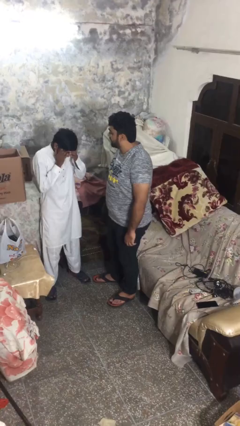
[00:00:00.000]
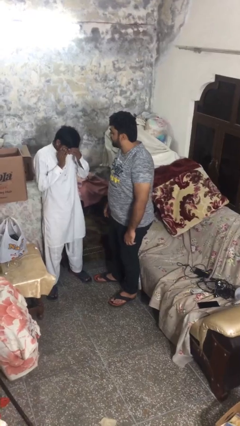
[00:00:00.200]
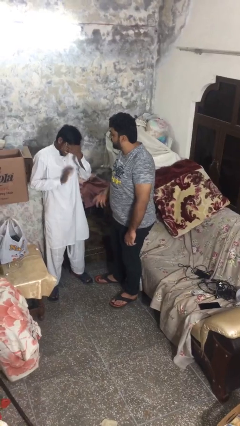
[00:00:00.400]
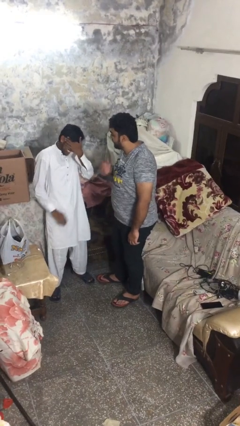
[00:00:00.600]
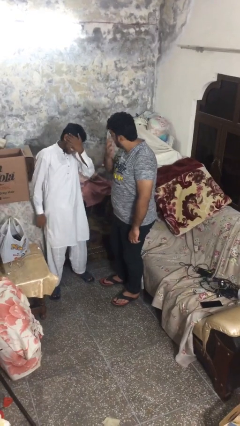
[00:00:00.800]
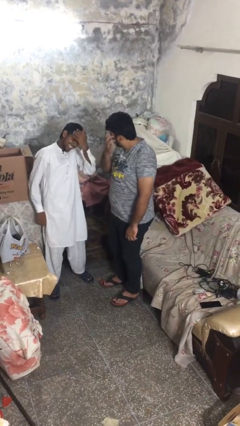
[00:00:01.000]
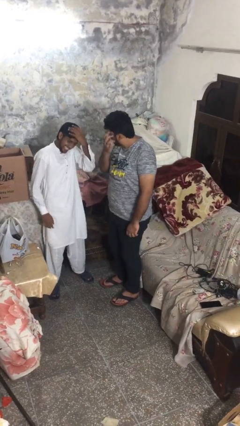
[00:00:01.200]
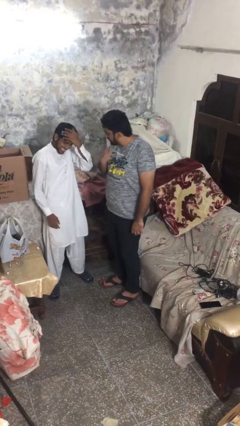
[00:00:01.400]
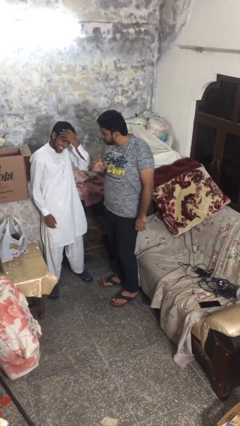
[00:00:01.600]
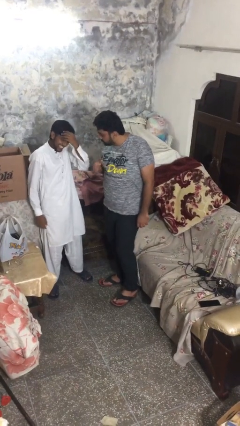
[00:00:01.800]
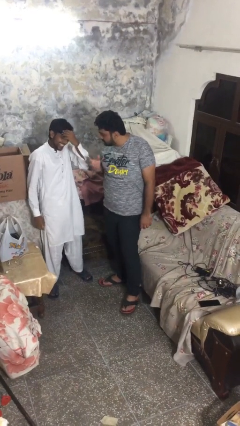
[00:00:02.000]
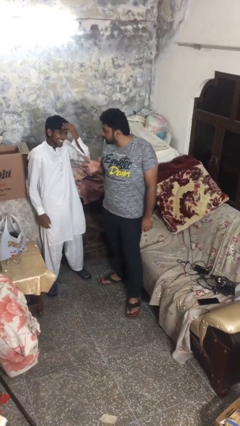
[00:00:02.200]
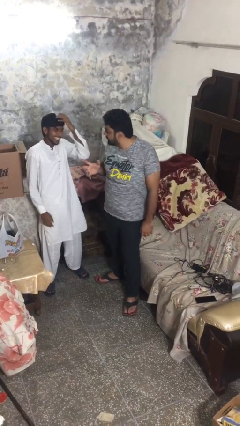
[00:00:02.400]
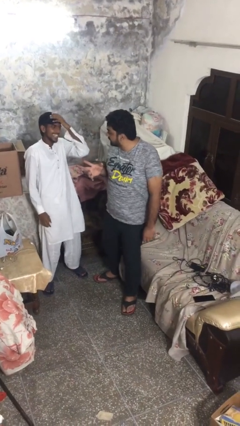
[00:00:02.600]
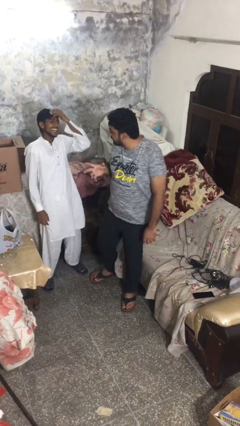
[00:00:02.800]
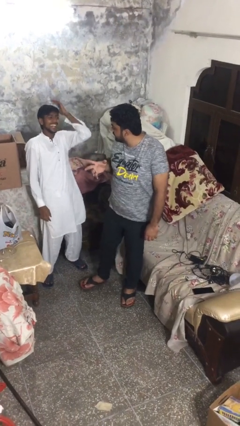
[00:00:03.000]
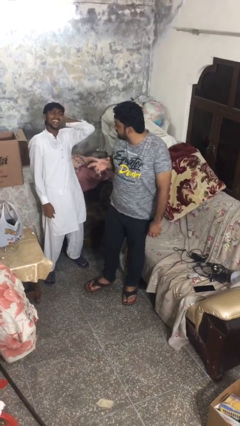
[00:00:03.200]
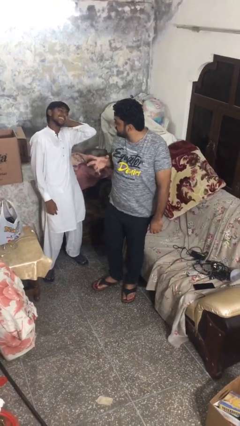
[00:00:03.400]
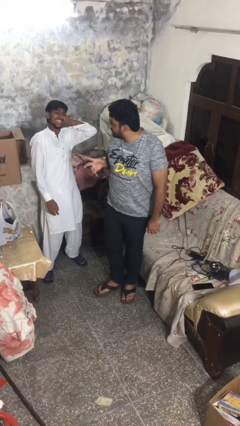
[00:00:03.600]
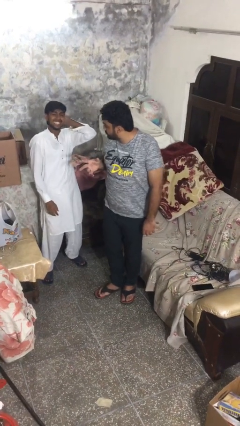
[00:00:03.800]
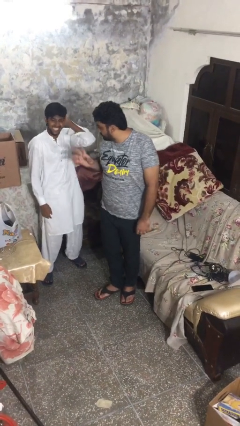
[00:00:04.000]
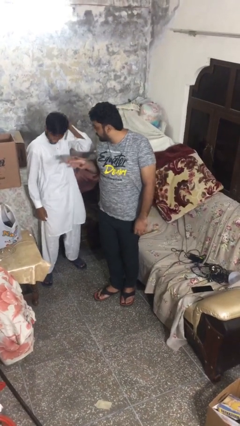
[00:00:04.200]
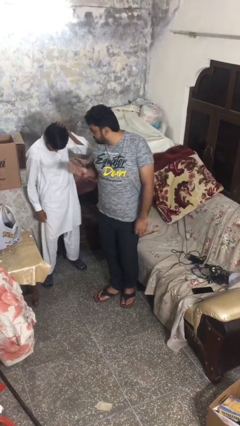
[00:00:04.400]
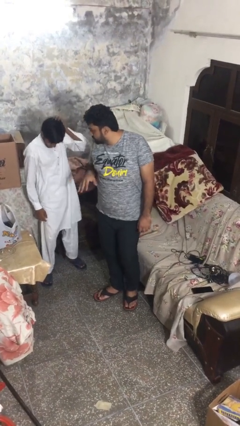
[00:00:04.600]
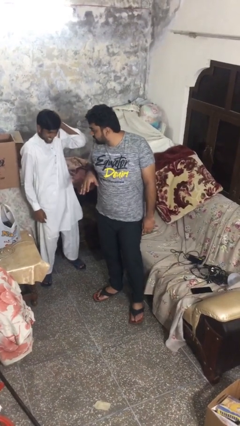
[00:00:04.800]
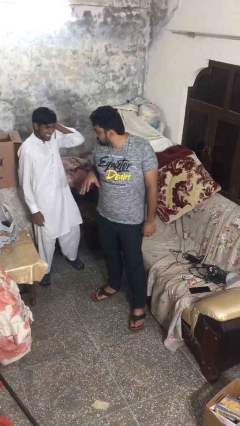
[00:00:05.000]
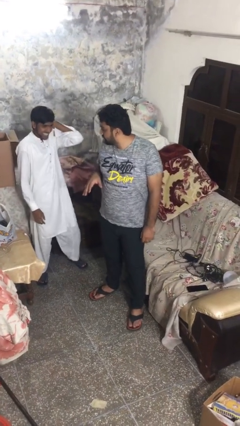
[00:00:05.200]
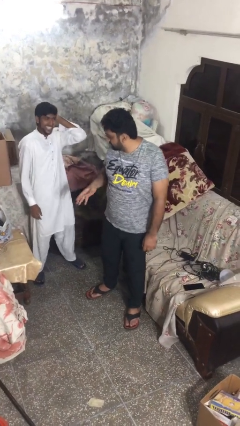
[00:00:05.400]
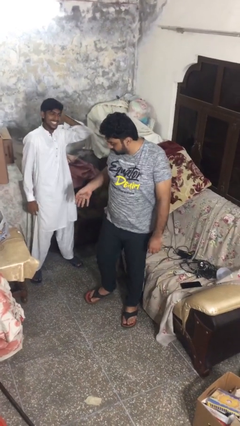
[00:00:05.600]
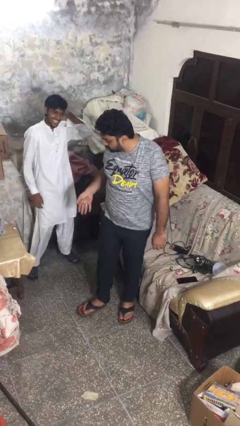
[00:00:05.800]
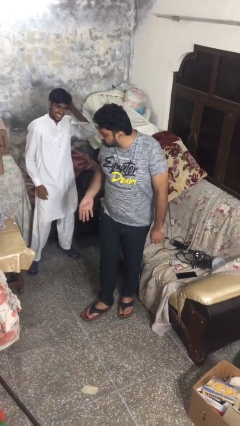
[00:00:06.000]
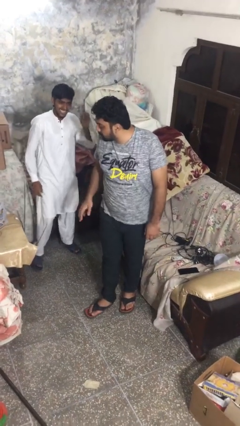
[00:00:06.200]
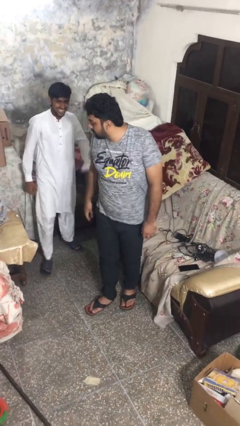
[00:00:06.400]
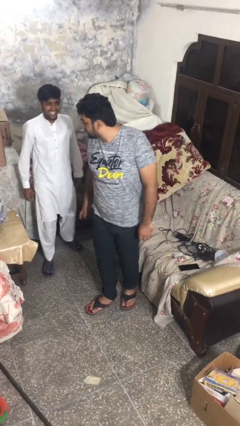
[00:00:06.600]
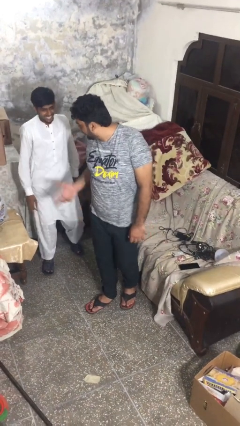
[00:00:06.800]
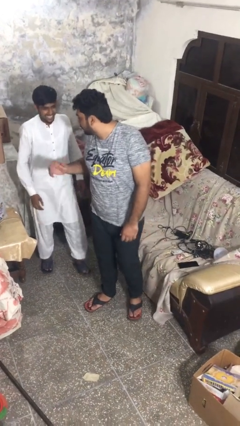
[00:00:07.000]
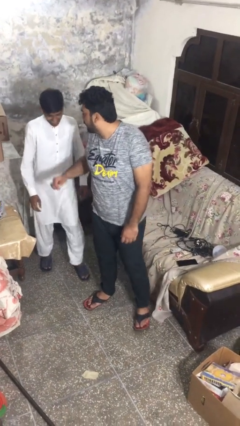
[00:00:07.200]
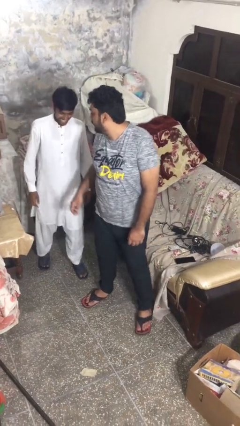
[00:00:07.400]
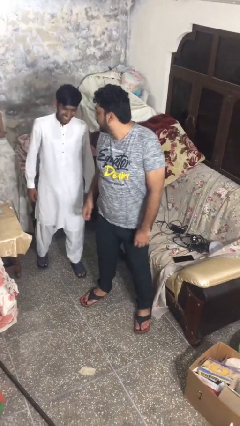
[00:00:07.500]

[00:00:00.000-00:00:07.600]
person talks to person

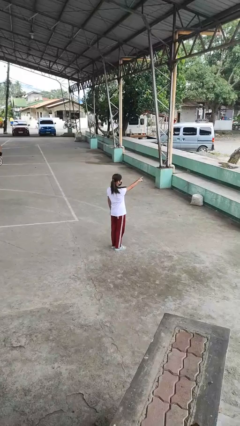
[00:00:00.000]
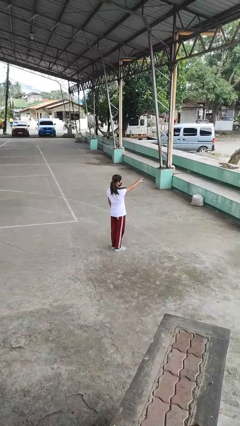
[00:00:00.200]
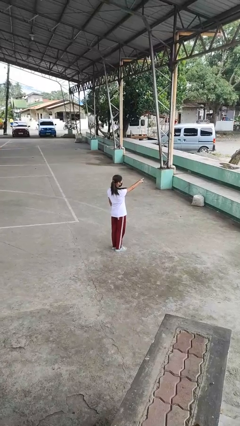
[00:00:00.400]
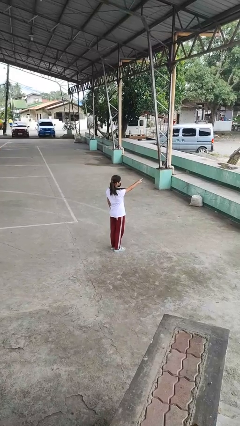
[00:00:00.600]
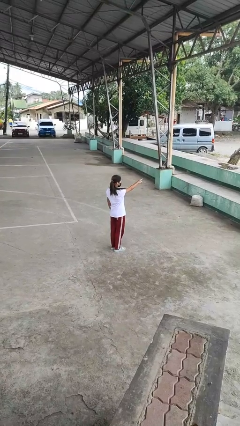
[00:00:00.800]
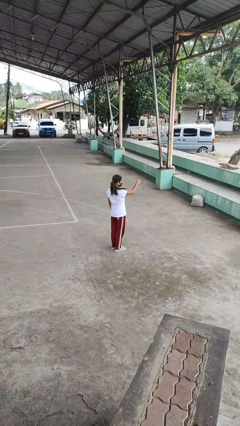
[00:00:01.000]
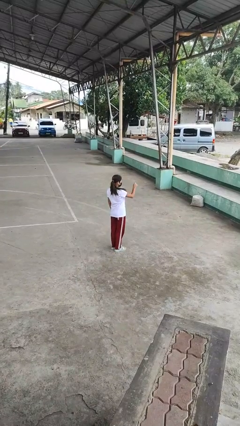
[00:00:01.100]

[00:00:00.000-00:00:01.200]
person points at person

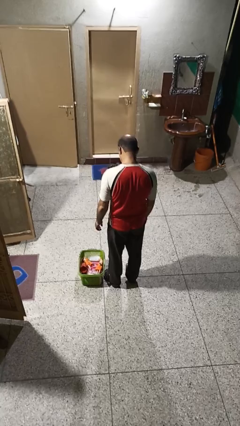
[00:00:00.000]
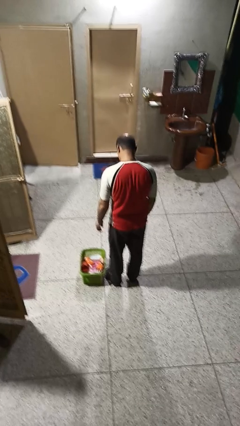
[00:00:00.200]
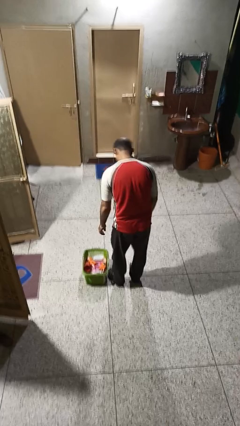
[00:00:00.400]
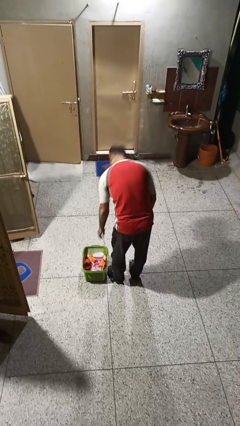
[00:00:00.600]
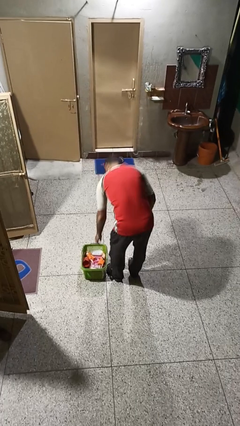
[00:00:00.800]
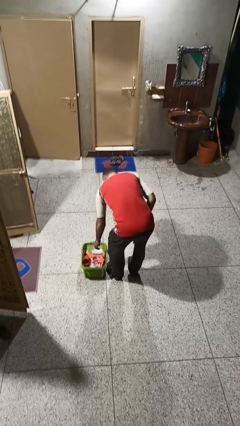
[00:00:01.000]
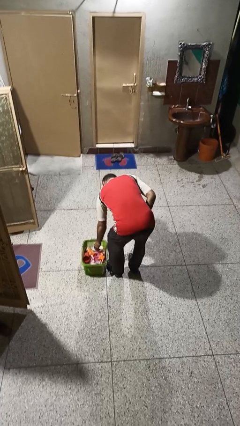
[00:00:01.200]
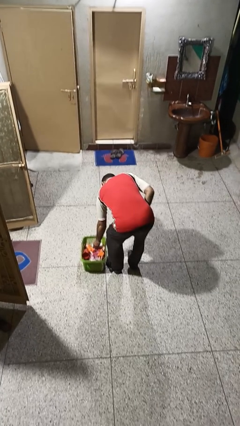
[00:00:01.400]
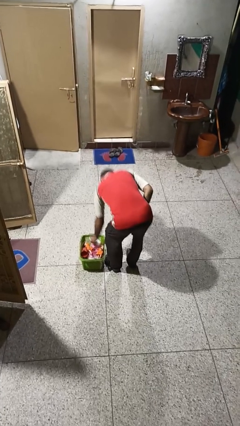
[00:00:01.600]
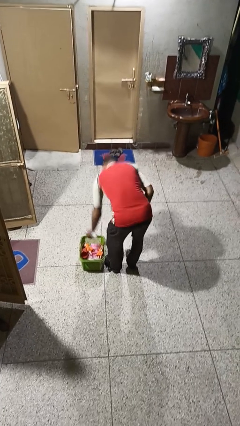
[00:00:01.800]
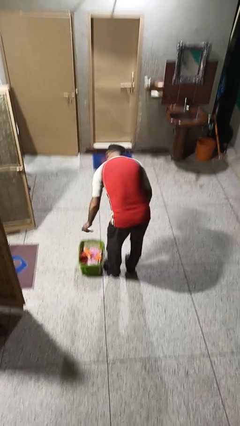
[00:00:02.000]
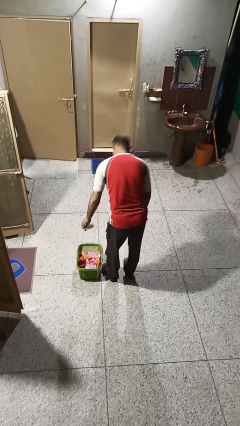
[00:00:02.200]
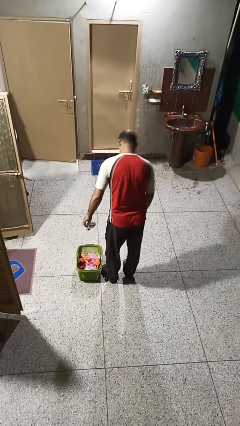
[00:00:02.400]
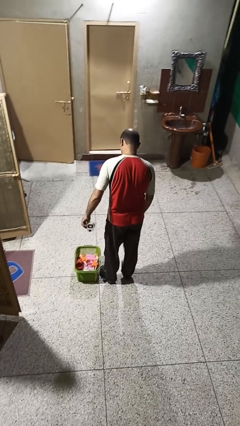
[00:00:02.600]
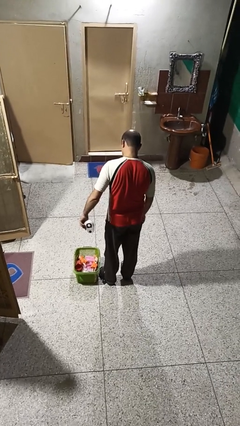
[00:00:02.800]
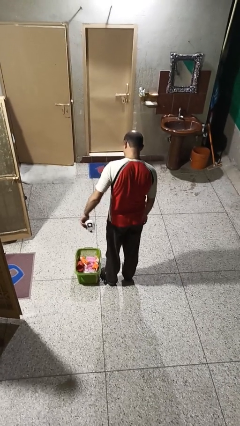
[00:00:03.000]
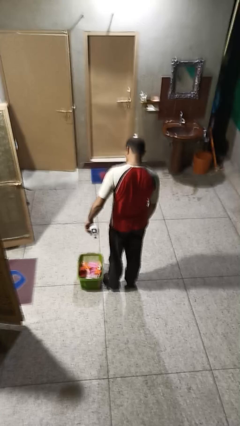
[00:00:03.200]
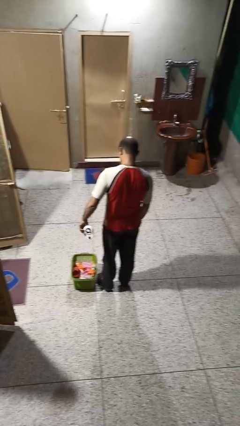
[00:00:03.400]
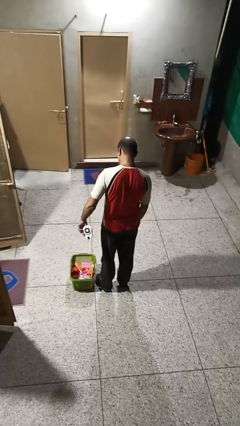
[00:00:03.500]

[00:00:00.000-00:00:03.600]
person takes object from basket

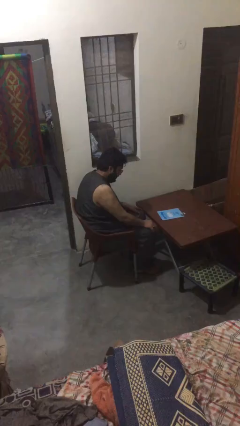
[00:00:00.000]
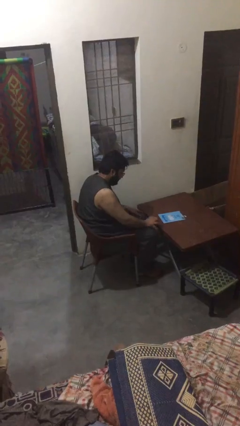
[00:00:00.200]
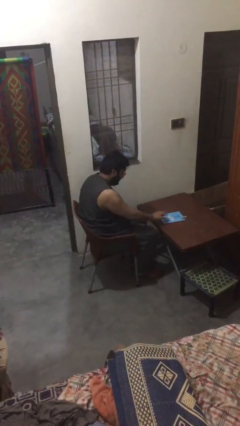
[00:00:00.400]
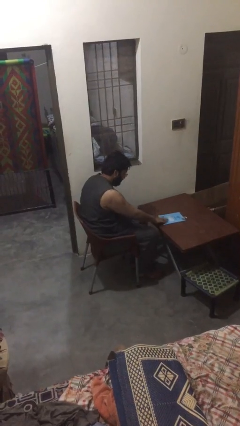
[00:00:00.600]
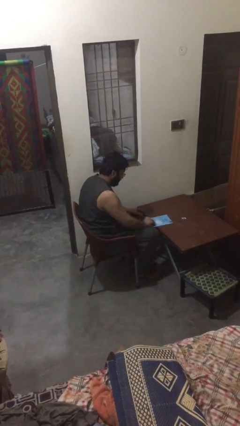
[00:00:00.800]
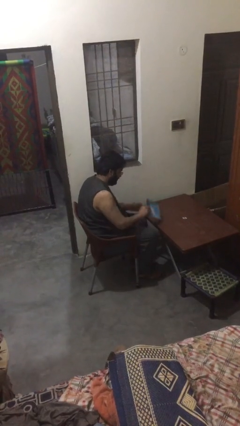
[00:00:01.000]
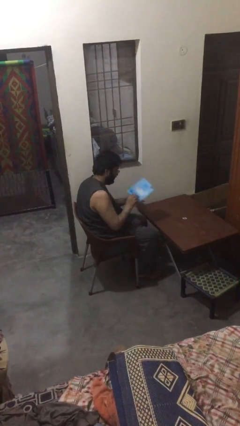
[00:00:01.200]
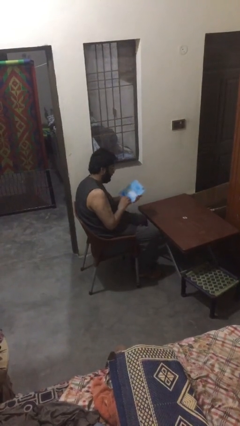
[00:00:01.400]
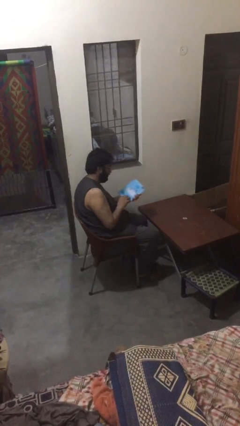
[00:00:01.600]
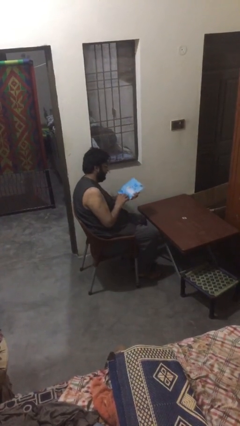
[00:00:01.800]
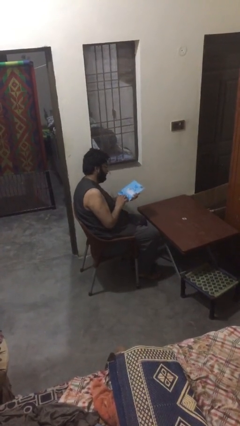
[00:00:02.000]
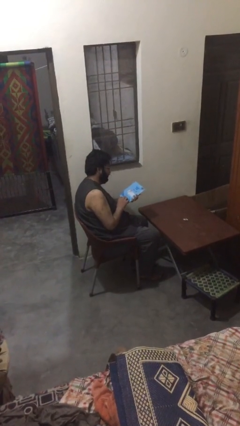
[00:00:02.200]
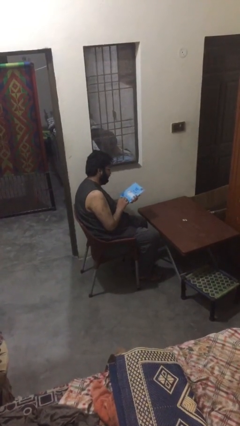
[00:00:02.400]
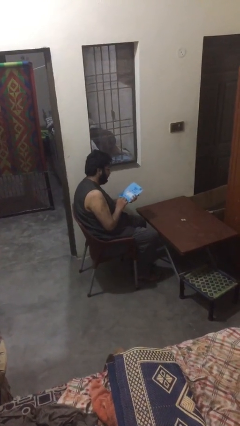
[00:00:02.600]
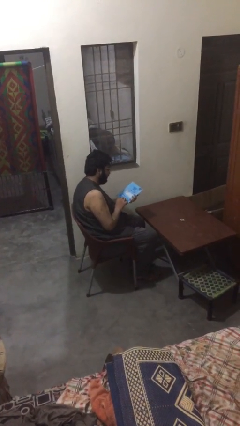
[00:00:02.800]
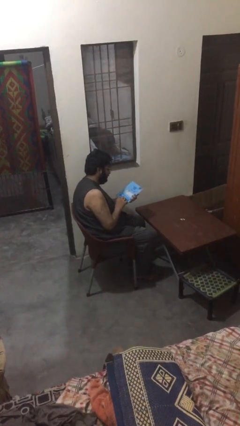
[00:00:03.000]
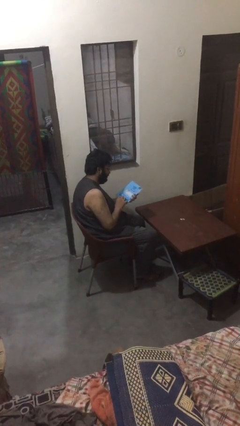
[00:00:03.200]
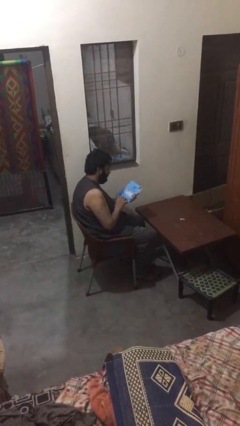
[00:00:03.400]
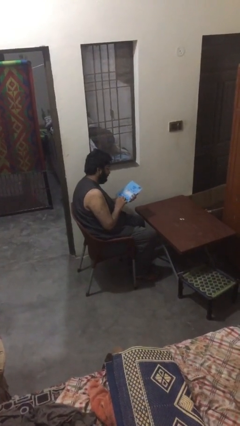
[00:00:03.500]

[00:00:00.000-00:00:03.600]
person picks up object from table

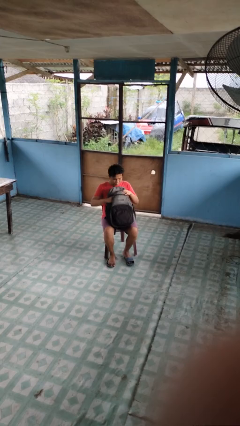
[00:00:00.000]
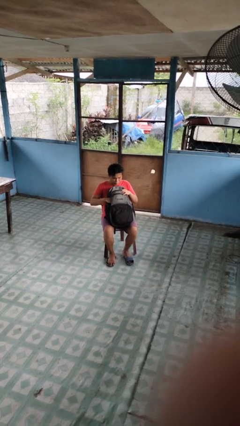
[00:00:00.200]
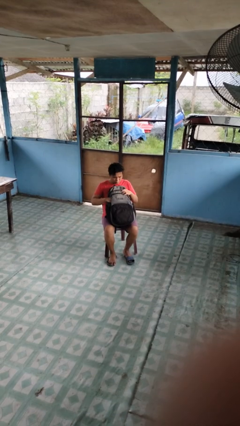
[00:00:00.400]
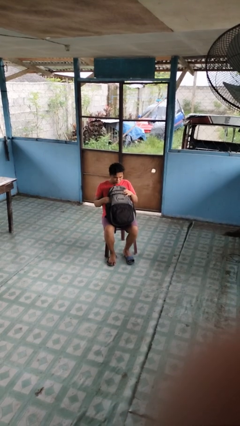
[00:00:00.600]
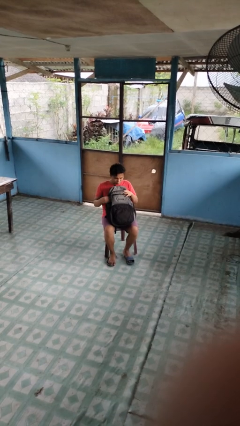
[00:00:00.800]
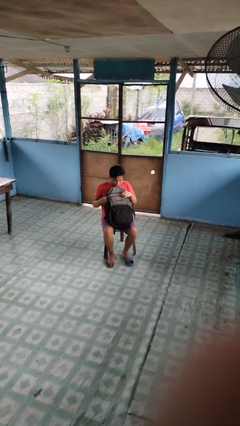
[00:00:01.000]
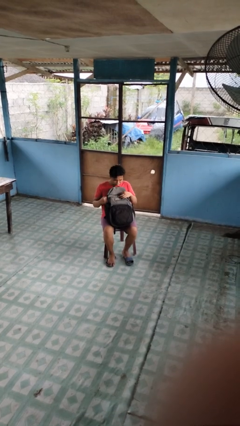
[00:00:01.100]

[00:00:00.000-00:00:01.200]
person puts object into backpack
